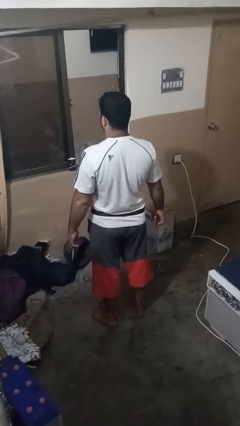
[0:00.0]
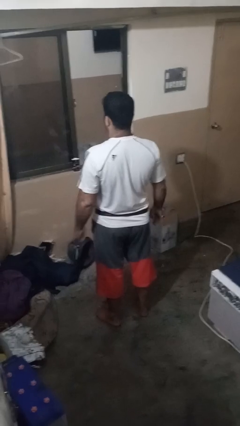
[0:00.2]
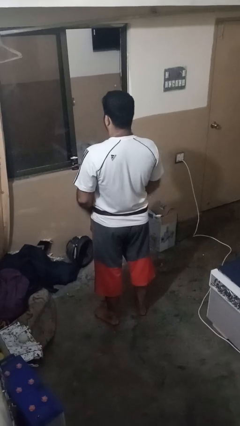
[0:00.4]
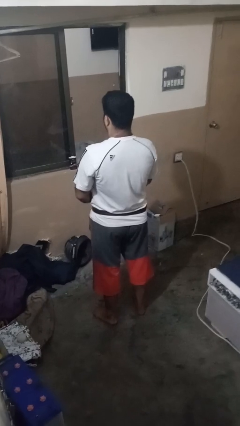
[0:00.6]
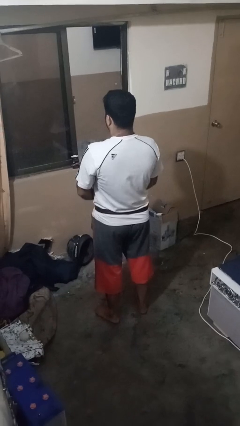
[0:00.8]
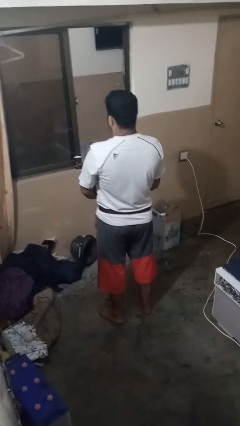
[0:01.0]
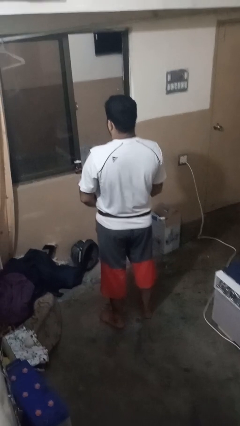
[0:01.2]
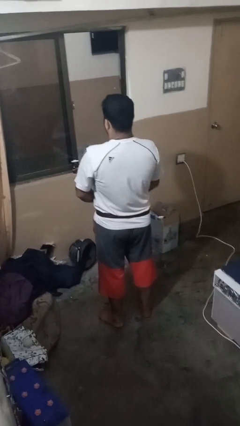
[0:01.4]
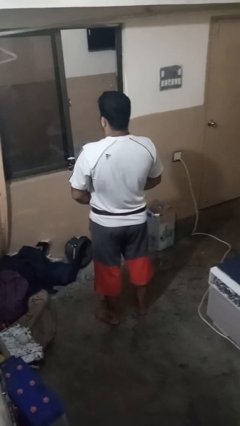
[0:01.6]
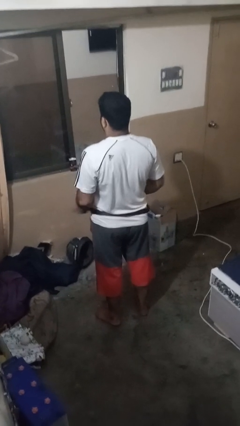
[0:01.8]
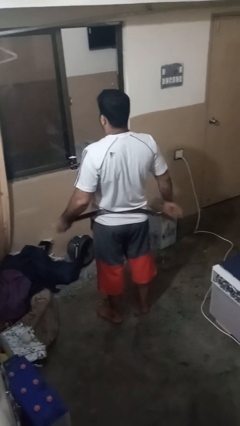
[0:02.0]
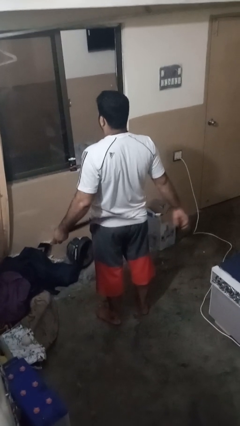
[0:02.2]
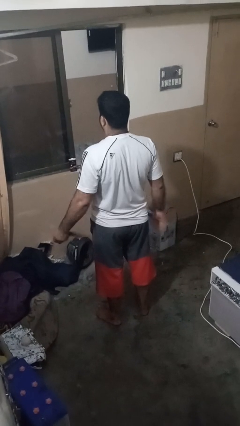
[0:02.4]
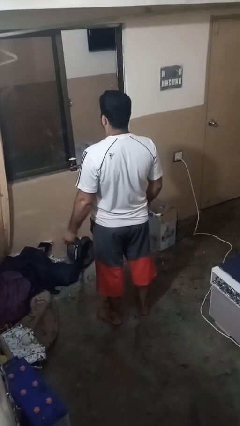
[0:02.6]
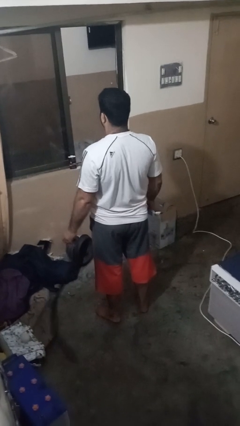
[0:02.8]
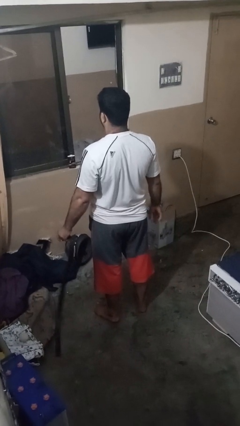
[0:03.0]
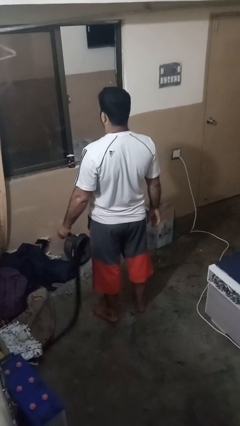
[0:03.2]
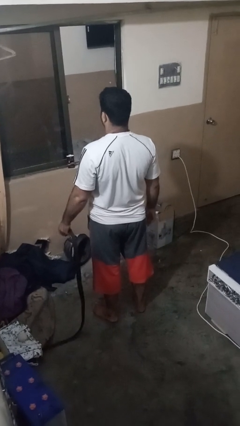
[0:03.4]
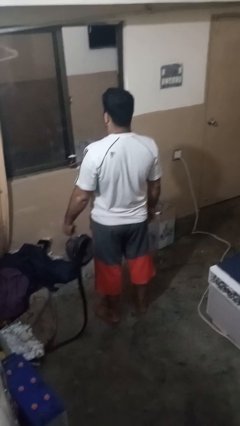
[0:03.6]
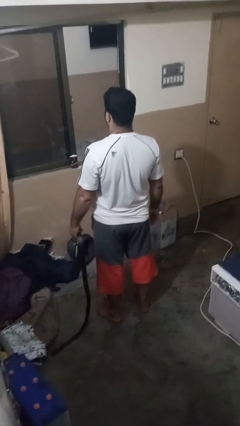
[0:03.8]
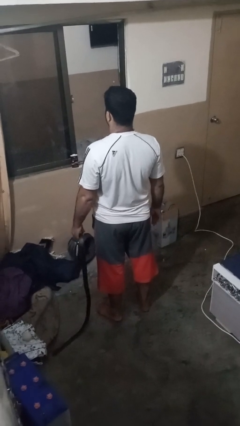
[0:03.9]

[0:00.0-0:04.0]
person takes off belt

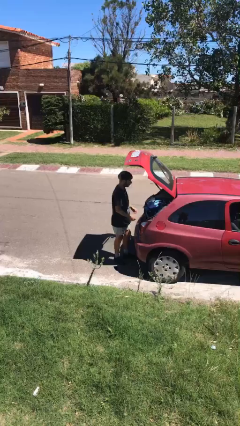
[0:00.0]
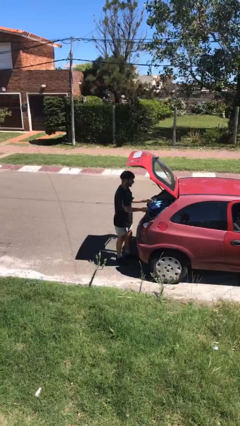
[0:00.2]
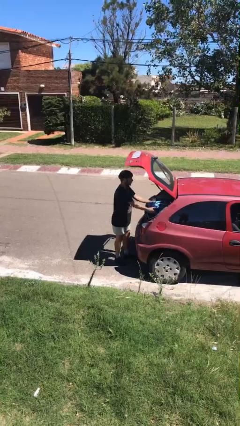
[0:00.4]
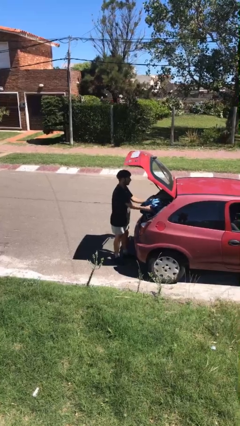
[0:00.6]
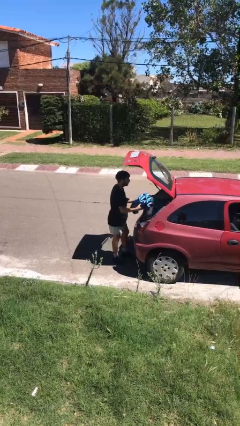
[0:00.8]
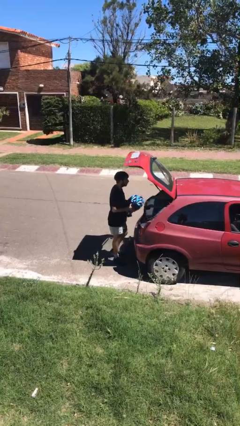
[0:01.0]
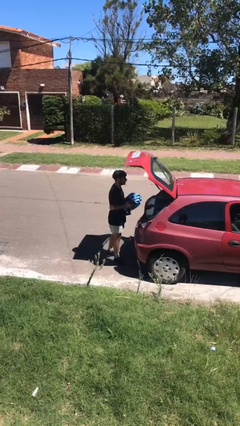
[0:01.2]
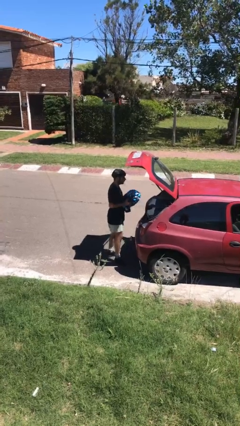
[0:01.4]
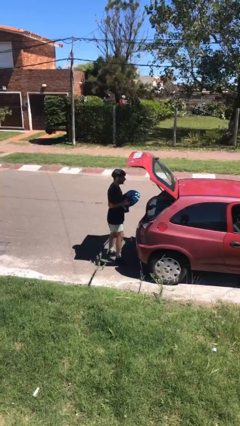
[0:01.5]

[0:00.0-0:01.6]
person unloads car

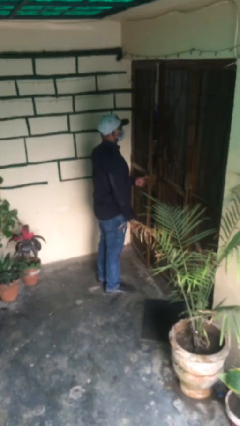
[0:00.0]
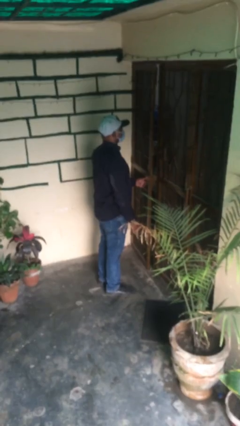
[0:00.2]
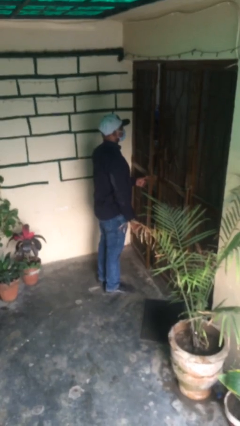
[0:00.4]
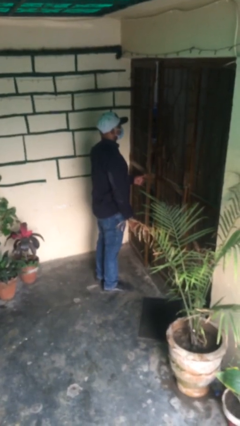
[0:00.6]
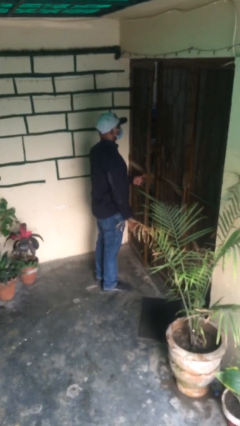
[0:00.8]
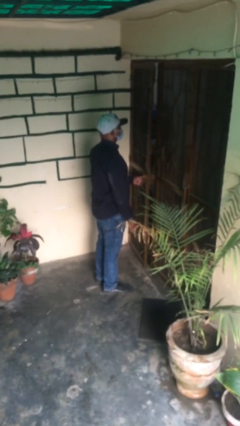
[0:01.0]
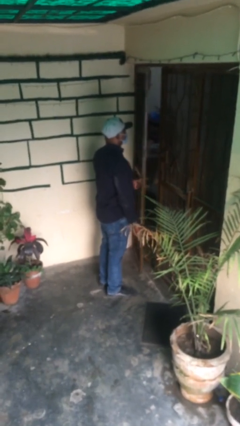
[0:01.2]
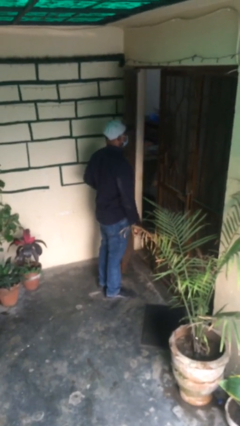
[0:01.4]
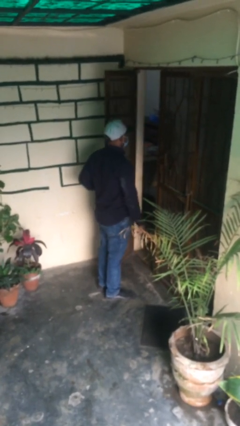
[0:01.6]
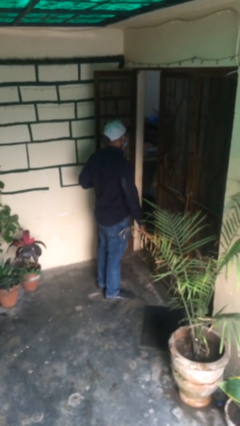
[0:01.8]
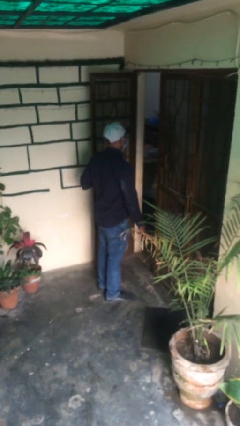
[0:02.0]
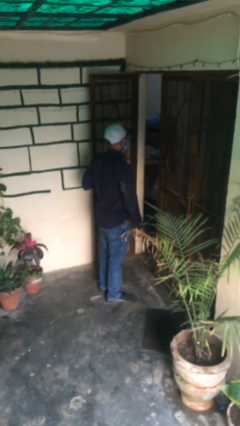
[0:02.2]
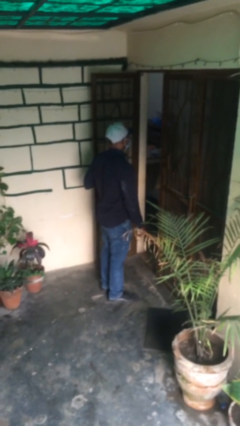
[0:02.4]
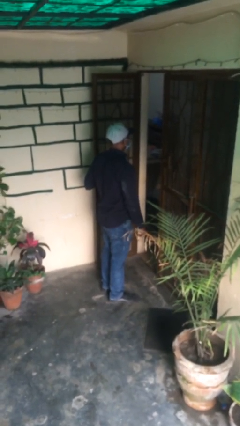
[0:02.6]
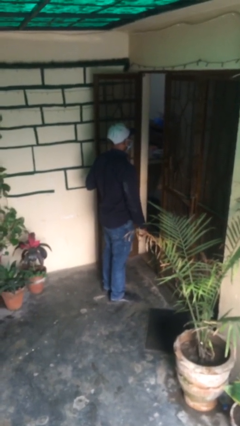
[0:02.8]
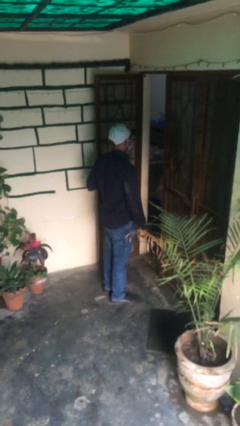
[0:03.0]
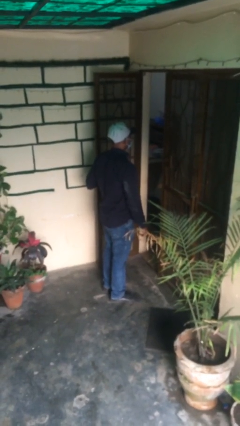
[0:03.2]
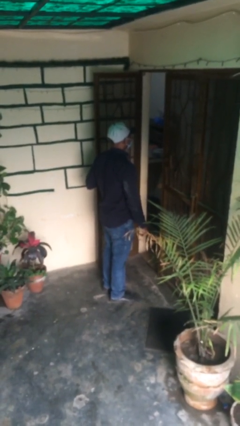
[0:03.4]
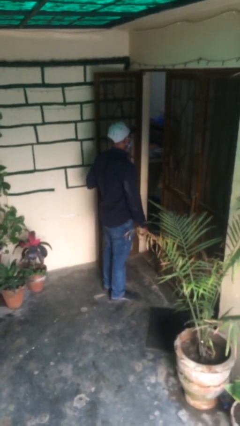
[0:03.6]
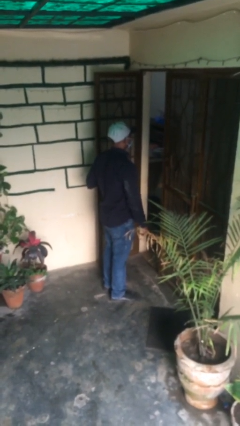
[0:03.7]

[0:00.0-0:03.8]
person opens facility door

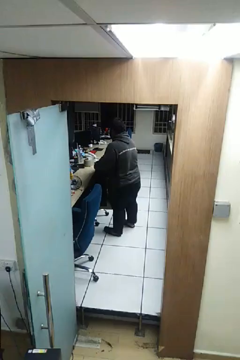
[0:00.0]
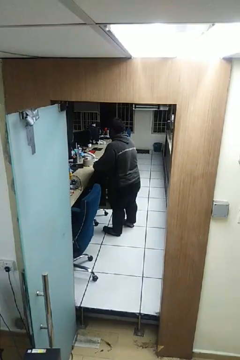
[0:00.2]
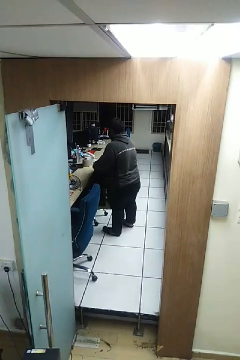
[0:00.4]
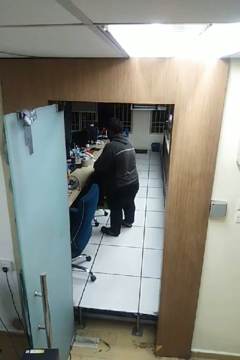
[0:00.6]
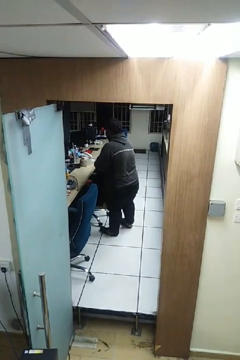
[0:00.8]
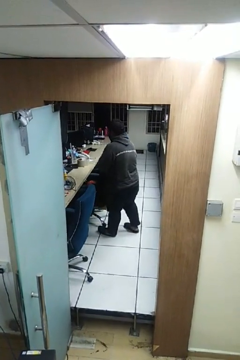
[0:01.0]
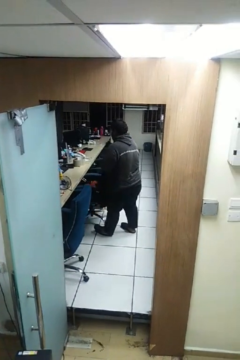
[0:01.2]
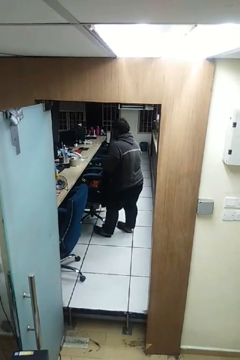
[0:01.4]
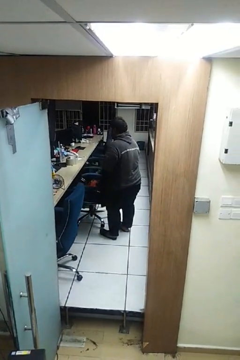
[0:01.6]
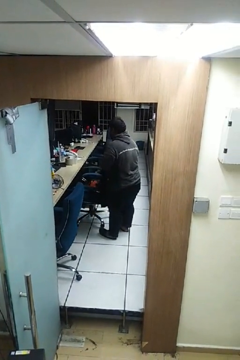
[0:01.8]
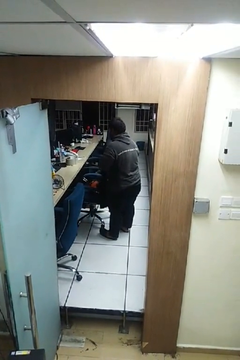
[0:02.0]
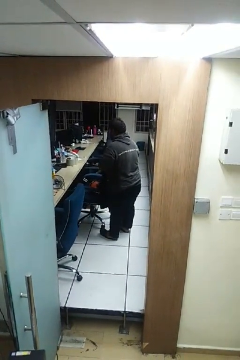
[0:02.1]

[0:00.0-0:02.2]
person pulls out chair

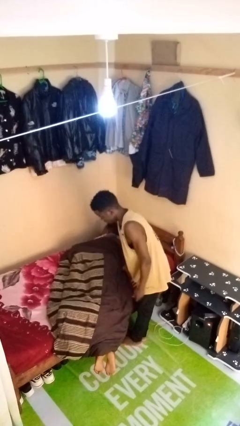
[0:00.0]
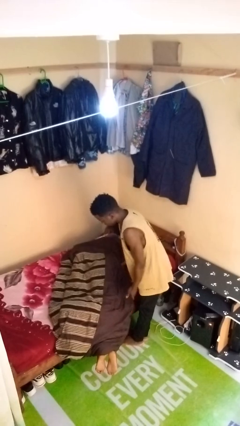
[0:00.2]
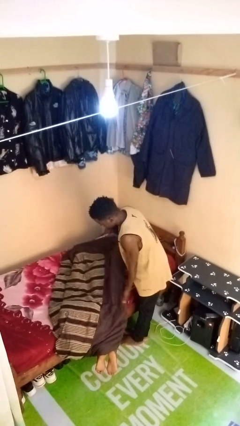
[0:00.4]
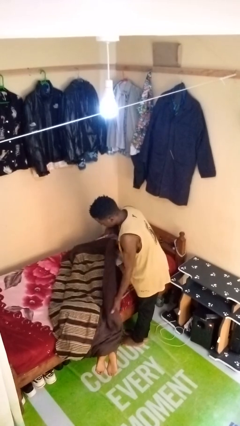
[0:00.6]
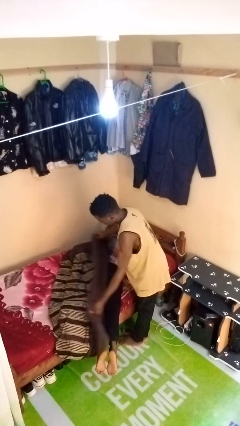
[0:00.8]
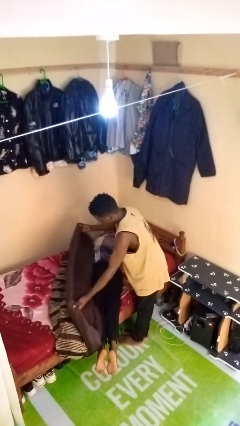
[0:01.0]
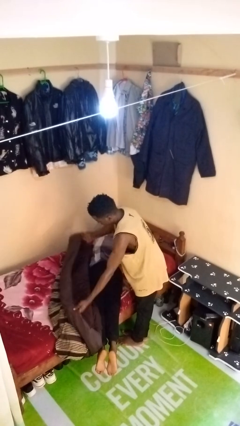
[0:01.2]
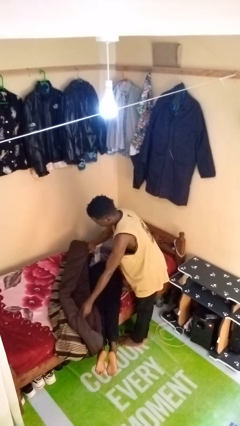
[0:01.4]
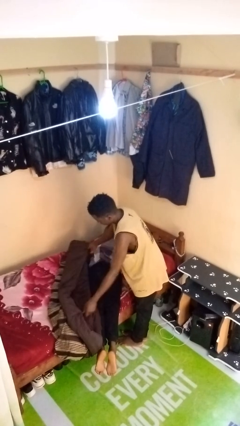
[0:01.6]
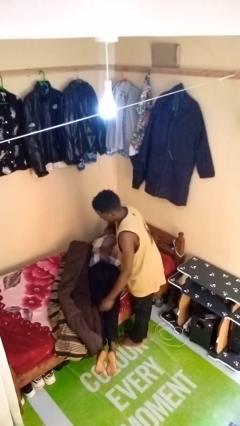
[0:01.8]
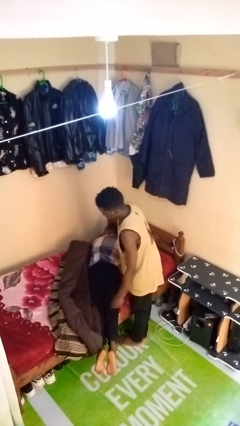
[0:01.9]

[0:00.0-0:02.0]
person uncovers friend with blanket

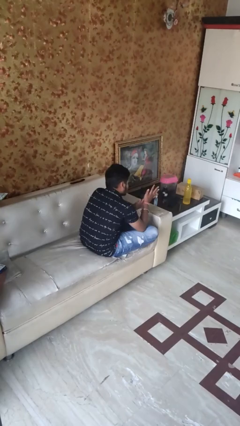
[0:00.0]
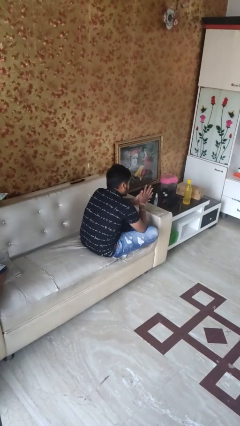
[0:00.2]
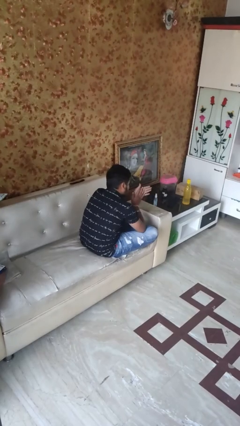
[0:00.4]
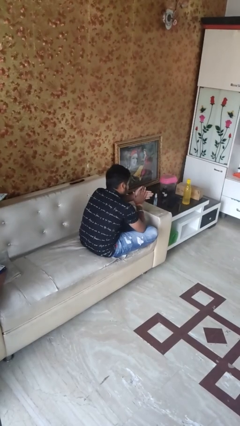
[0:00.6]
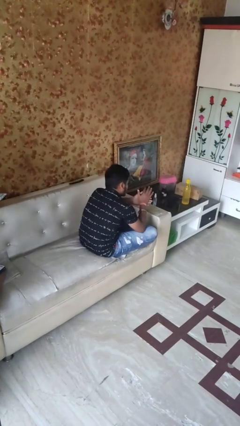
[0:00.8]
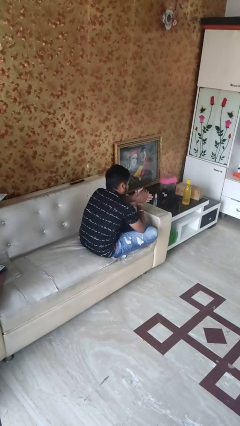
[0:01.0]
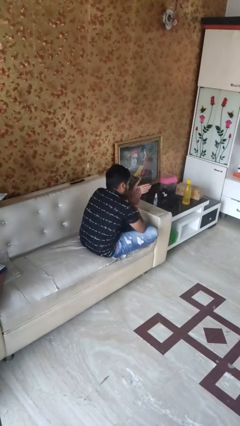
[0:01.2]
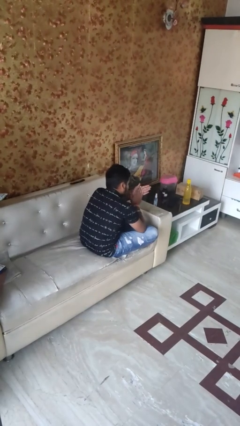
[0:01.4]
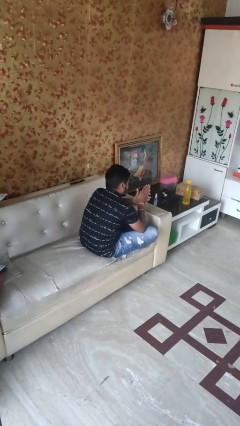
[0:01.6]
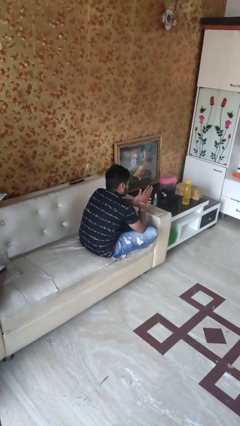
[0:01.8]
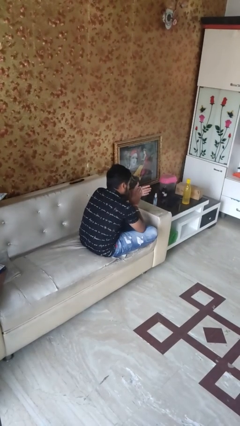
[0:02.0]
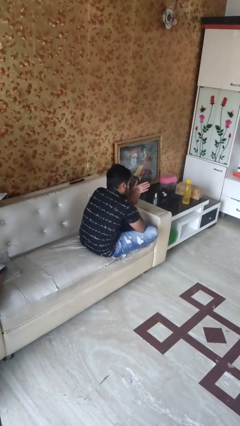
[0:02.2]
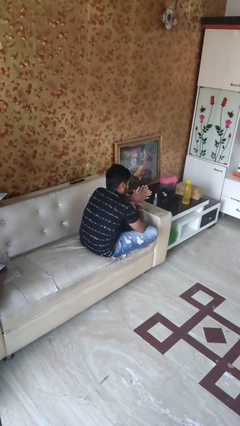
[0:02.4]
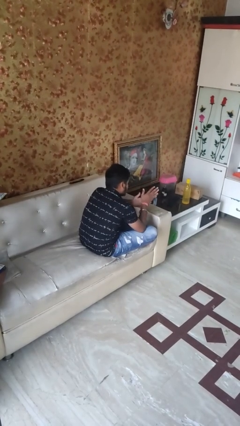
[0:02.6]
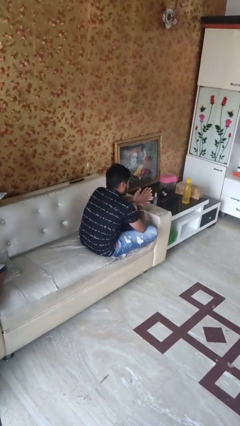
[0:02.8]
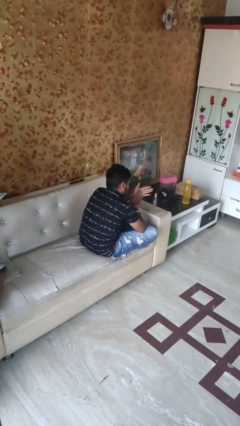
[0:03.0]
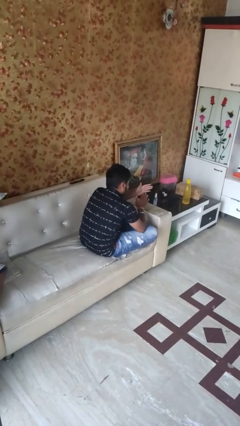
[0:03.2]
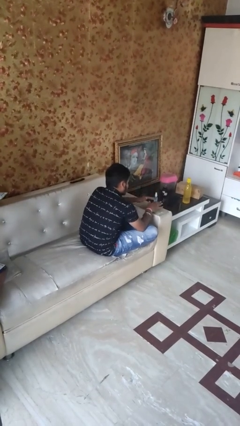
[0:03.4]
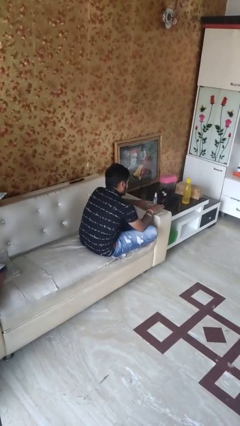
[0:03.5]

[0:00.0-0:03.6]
person looks at hands in lap
